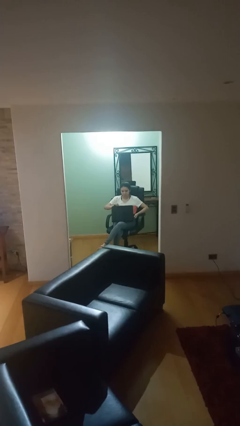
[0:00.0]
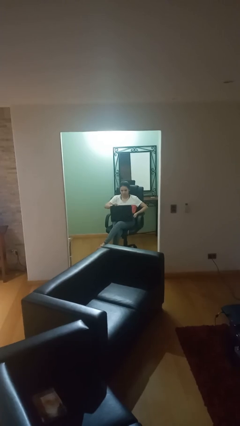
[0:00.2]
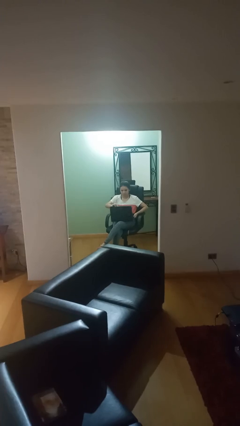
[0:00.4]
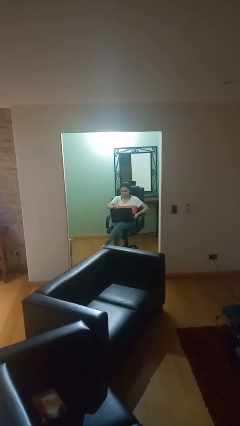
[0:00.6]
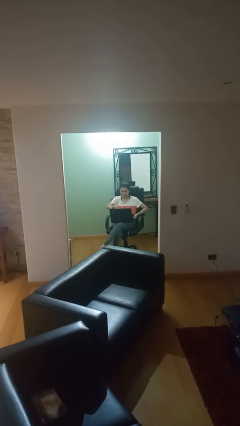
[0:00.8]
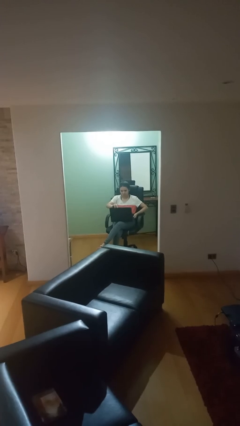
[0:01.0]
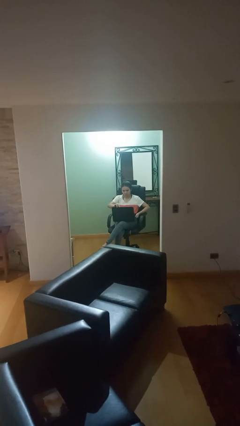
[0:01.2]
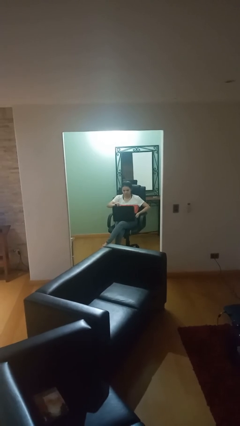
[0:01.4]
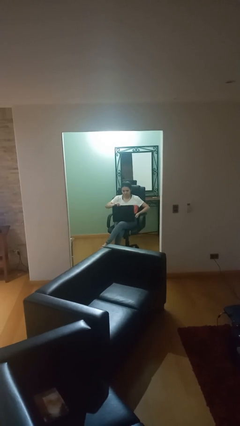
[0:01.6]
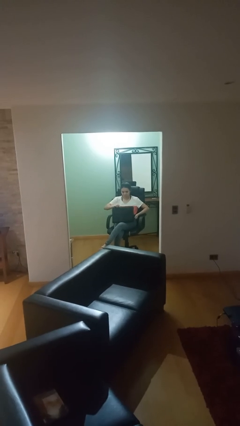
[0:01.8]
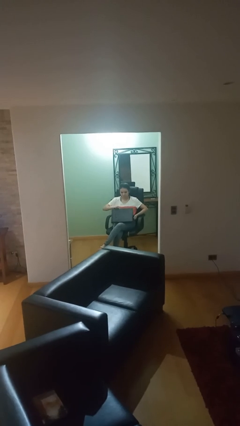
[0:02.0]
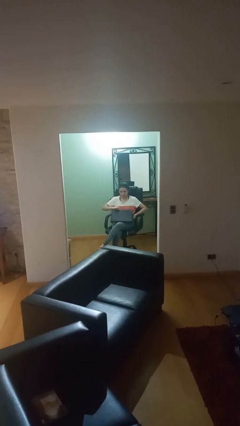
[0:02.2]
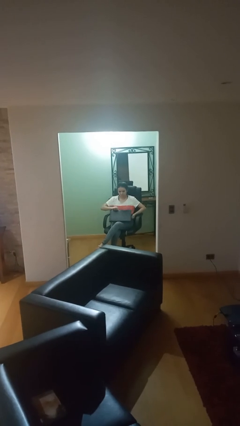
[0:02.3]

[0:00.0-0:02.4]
person interacts with laptop

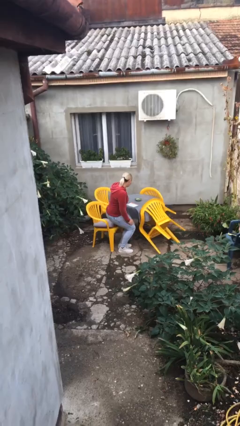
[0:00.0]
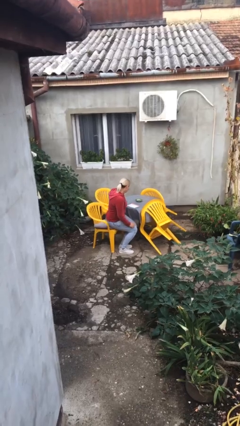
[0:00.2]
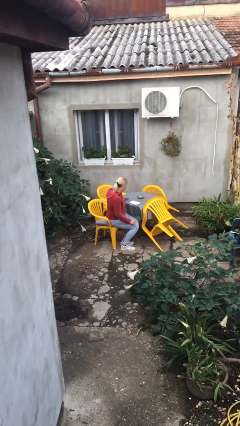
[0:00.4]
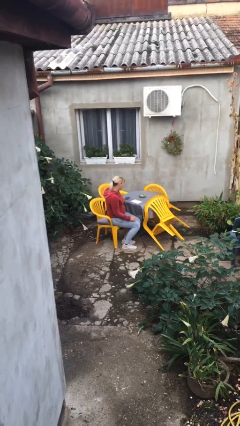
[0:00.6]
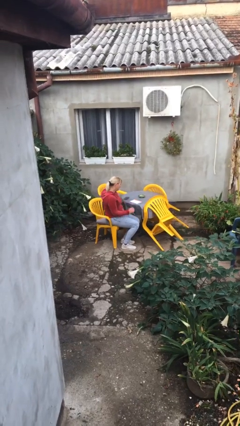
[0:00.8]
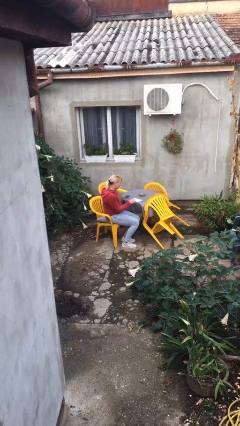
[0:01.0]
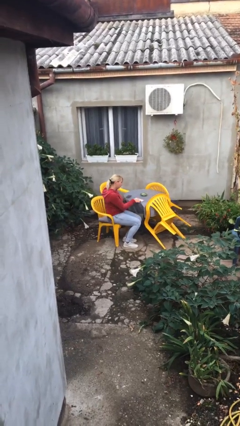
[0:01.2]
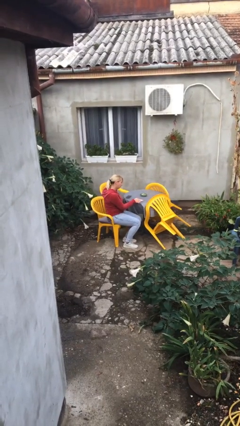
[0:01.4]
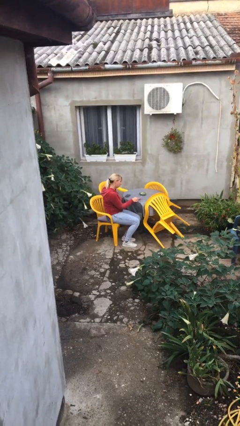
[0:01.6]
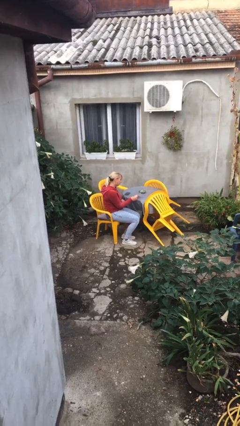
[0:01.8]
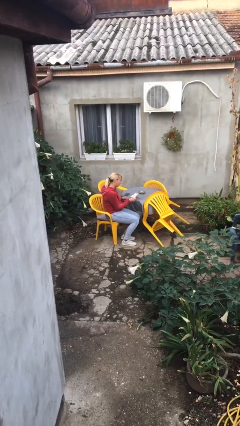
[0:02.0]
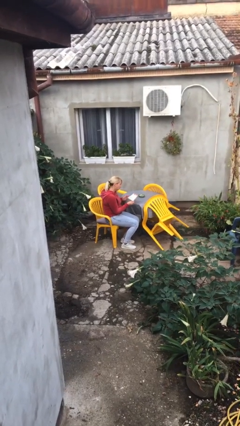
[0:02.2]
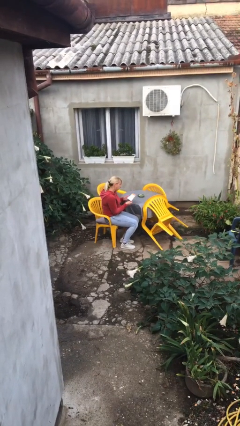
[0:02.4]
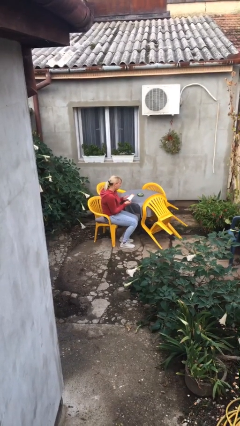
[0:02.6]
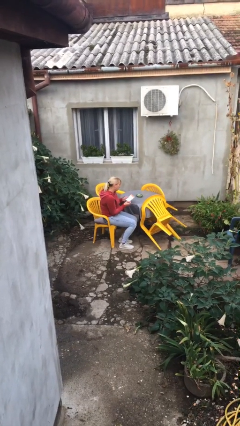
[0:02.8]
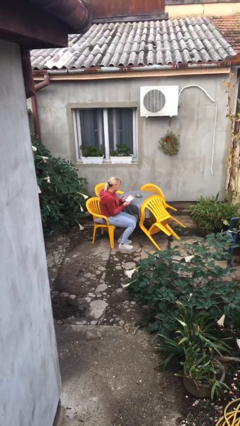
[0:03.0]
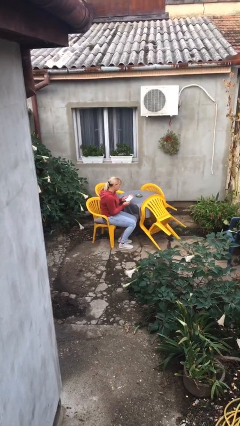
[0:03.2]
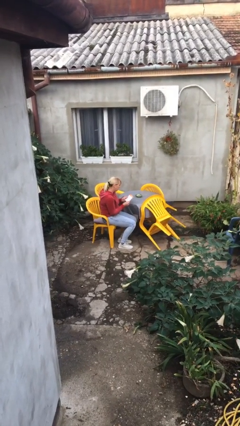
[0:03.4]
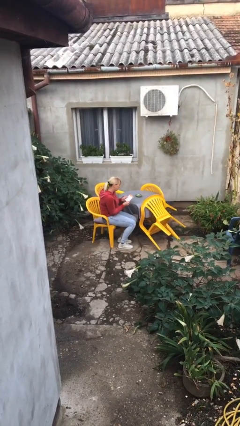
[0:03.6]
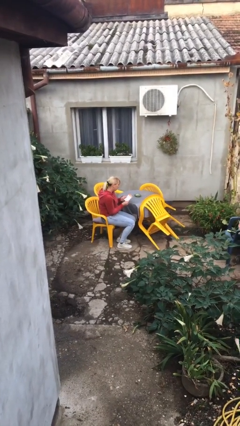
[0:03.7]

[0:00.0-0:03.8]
person sits down

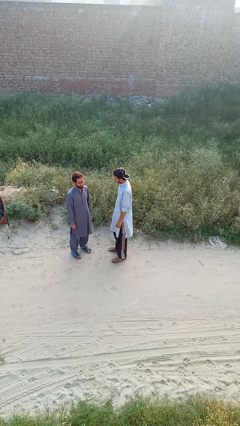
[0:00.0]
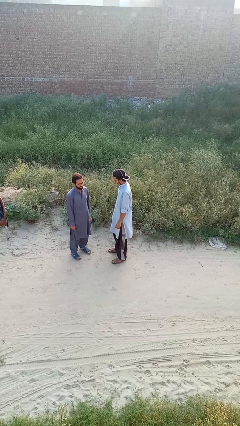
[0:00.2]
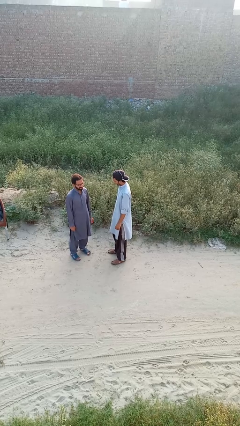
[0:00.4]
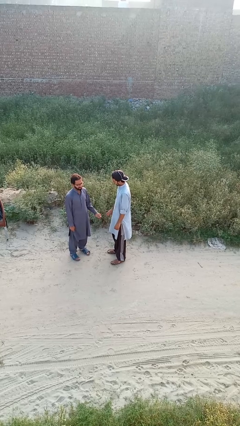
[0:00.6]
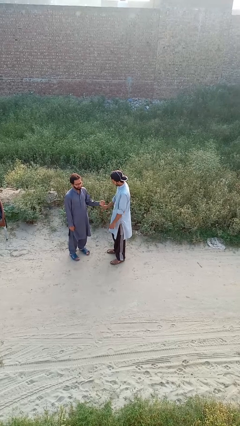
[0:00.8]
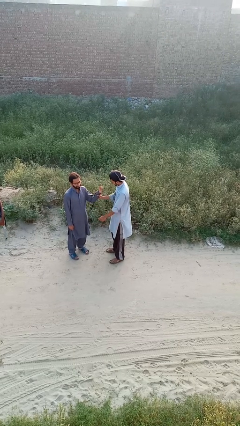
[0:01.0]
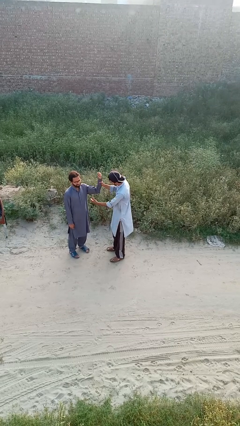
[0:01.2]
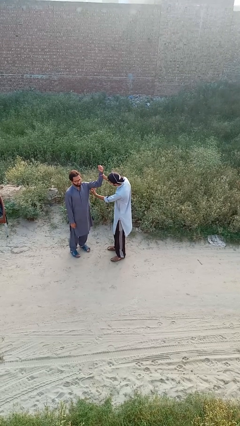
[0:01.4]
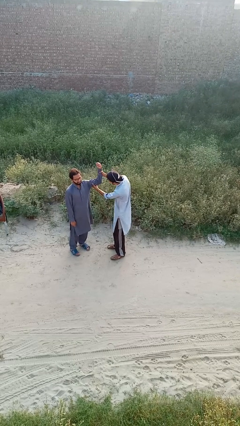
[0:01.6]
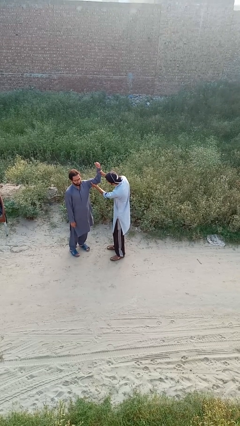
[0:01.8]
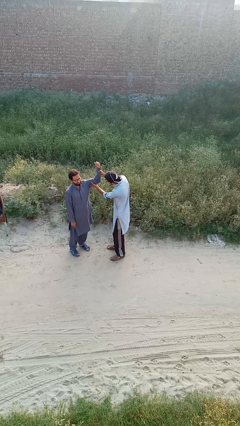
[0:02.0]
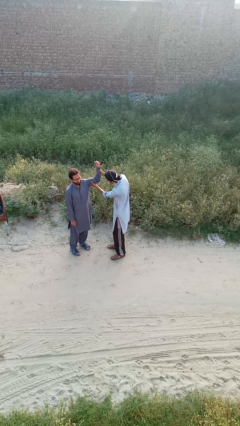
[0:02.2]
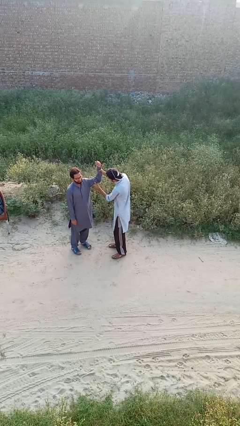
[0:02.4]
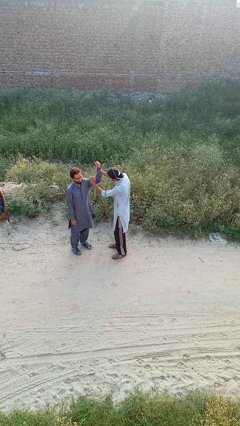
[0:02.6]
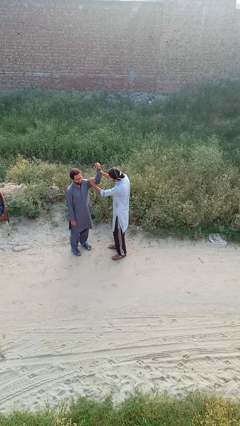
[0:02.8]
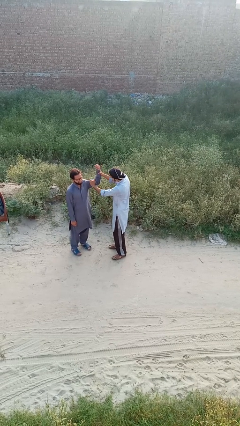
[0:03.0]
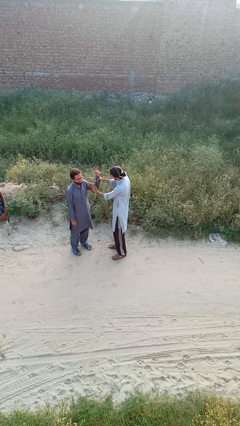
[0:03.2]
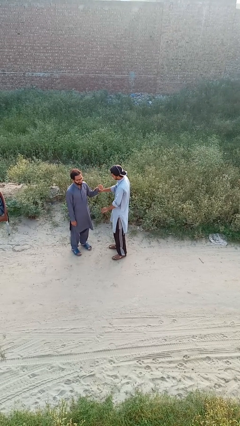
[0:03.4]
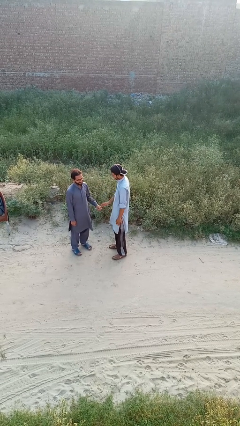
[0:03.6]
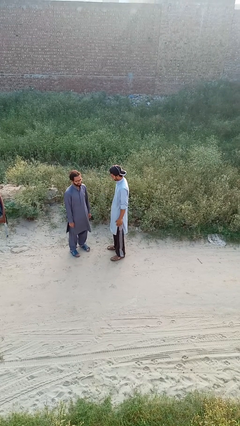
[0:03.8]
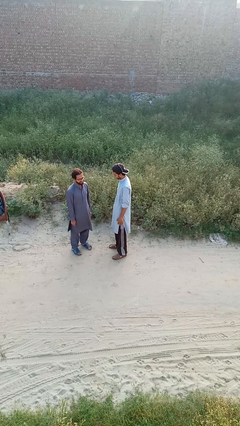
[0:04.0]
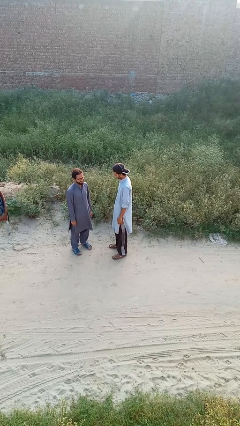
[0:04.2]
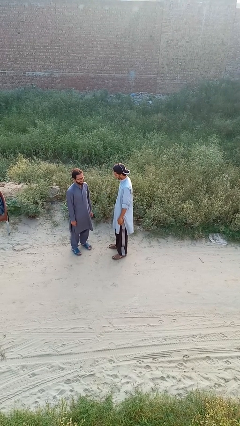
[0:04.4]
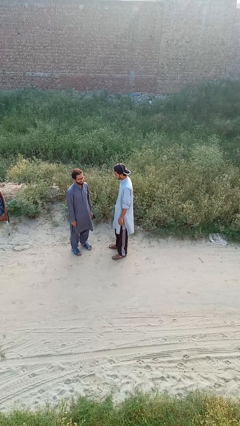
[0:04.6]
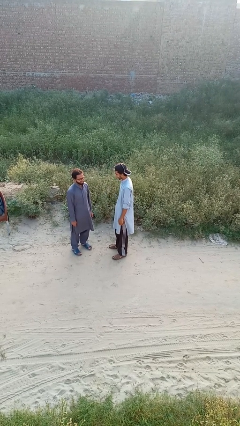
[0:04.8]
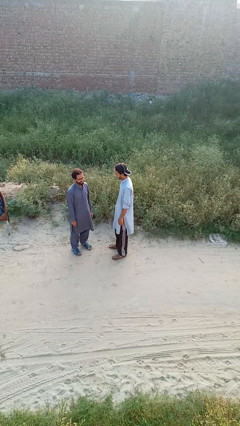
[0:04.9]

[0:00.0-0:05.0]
person grabs person by bicep

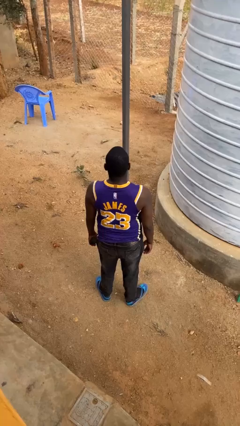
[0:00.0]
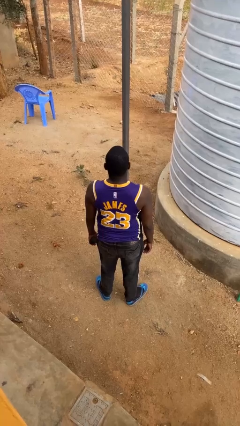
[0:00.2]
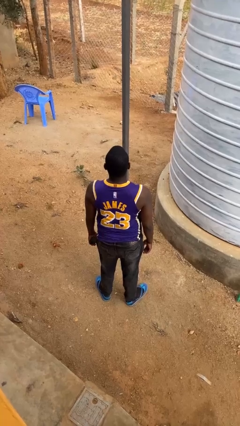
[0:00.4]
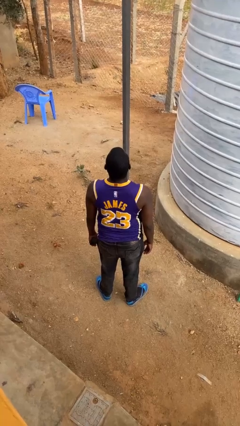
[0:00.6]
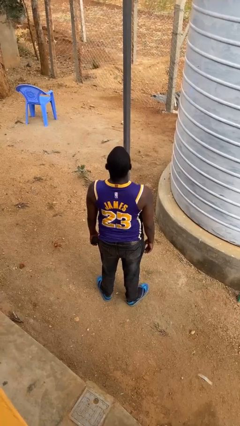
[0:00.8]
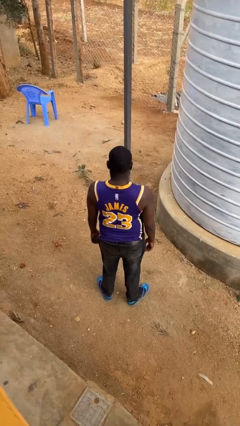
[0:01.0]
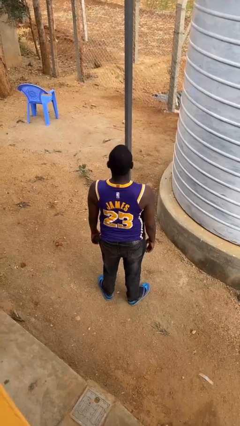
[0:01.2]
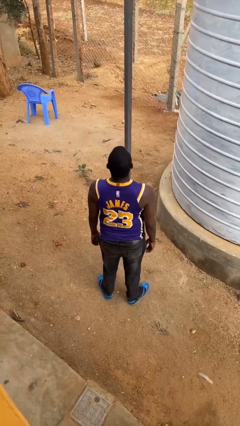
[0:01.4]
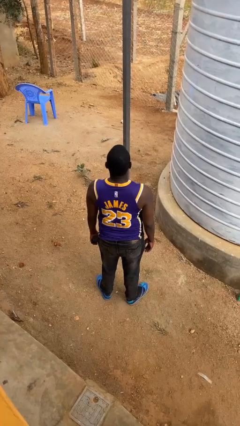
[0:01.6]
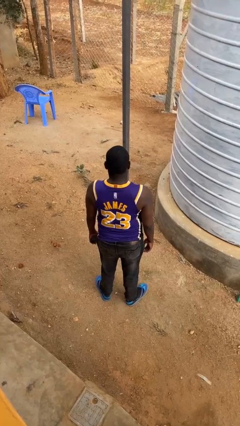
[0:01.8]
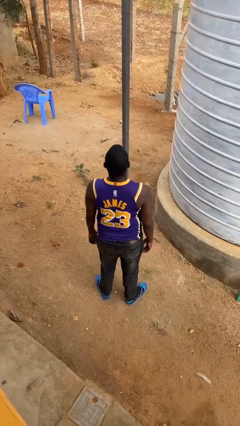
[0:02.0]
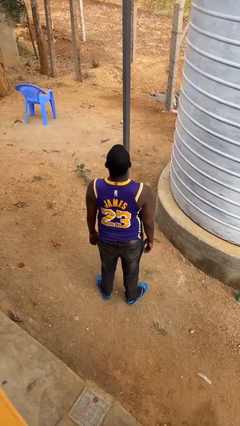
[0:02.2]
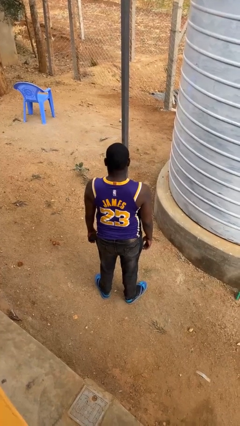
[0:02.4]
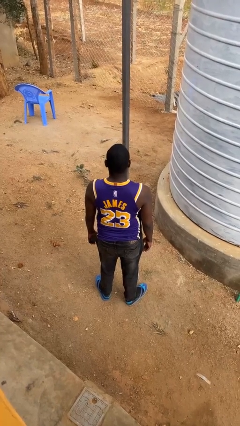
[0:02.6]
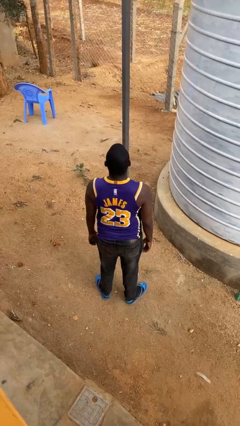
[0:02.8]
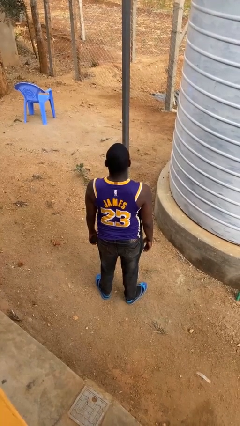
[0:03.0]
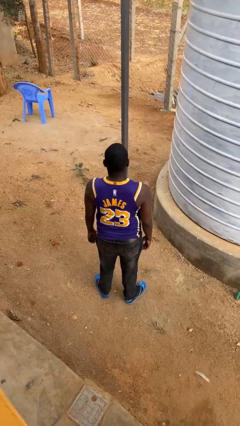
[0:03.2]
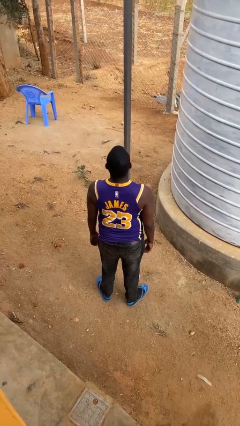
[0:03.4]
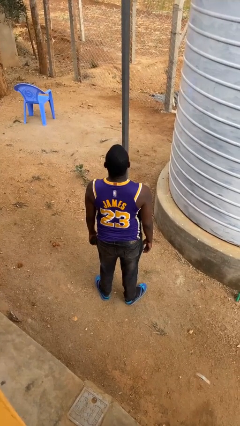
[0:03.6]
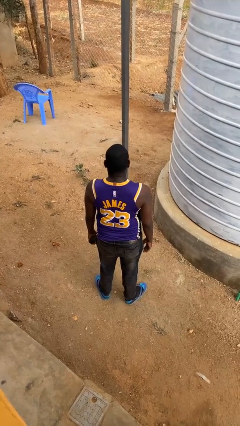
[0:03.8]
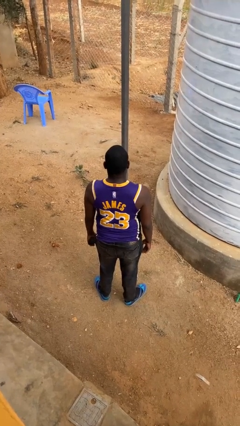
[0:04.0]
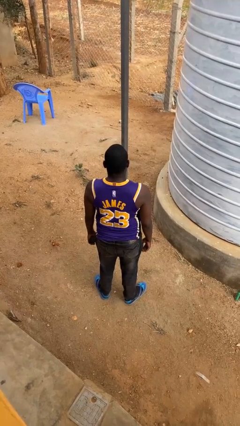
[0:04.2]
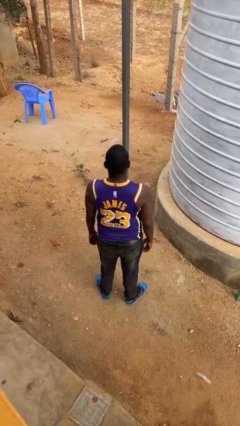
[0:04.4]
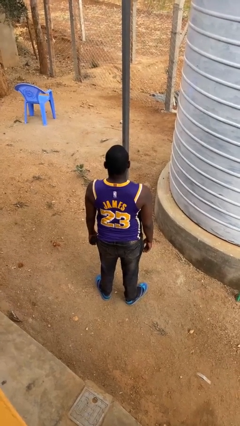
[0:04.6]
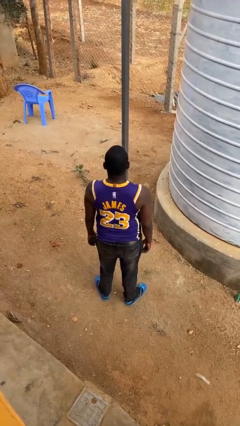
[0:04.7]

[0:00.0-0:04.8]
person nods head

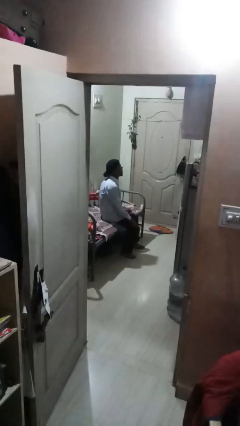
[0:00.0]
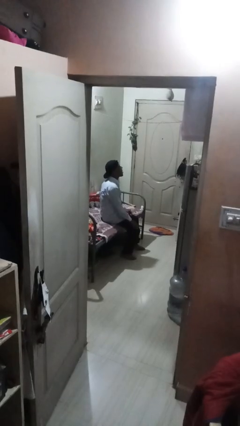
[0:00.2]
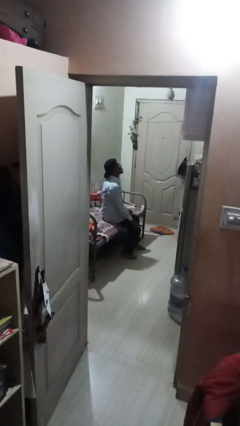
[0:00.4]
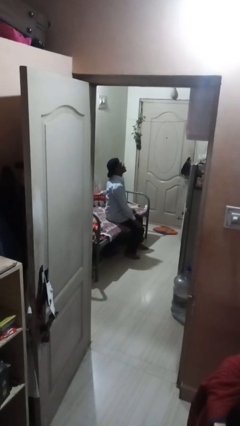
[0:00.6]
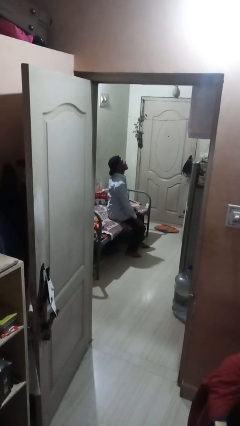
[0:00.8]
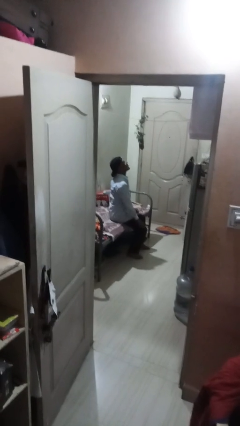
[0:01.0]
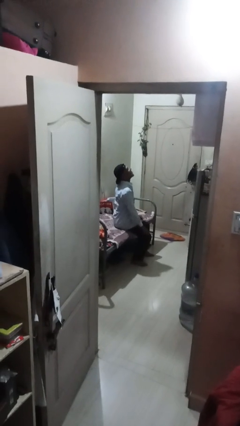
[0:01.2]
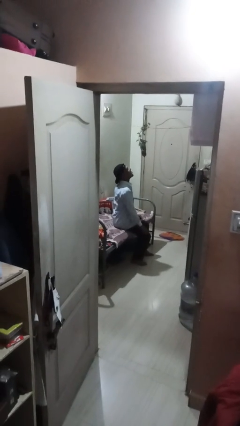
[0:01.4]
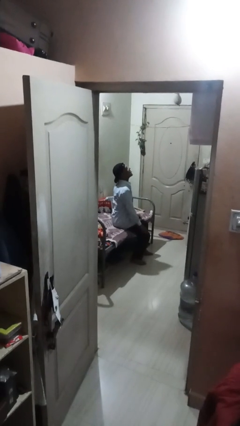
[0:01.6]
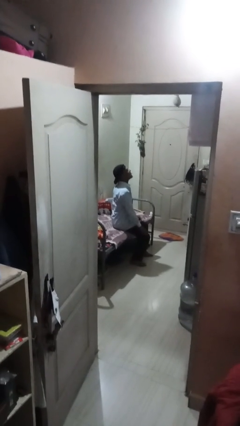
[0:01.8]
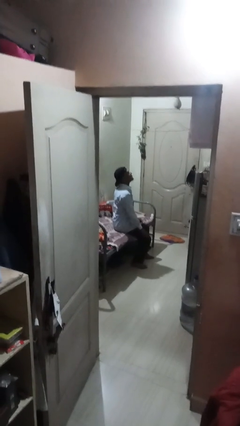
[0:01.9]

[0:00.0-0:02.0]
person sticks out tongue
